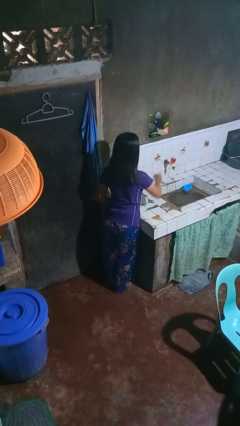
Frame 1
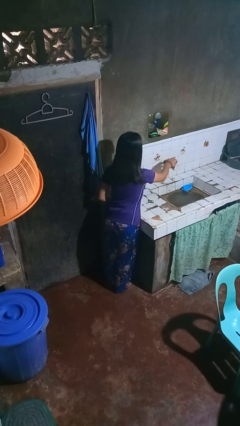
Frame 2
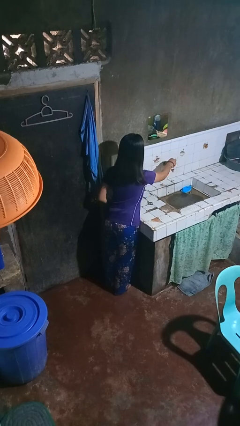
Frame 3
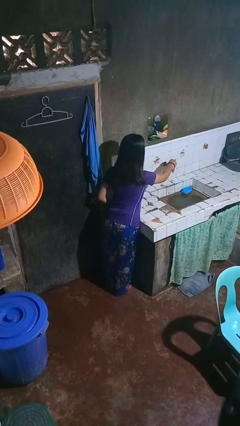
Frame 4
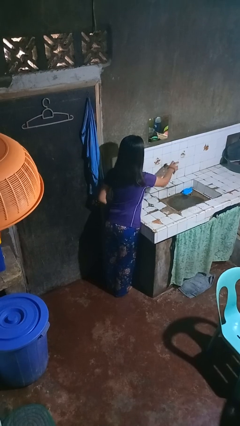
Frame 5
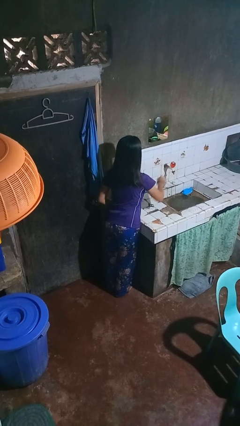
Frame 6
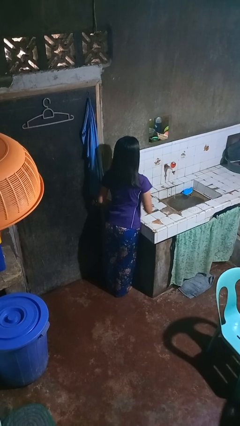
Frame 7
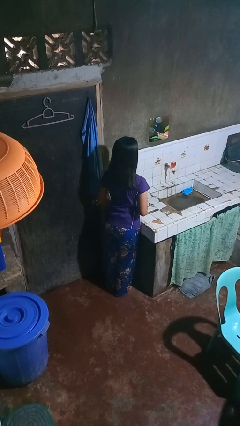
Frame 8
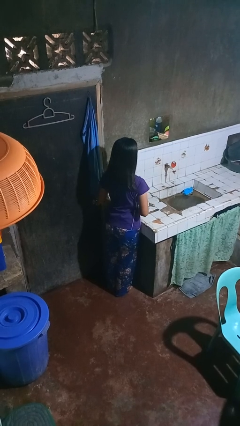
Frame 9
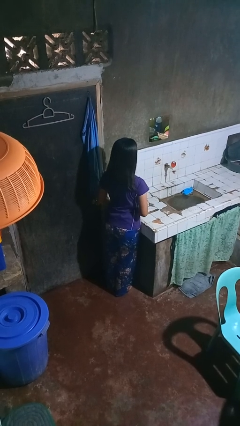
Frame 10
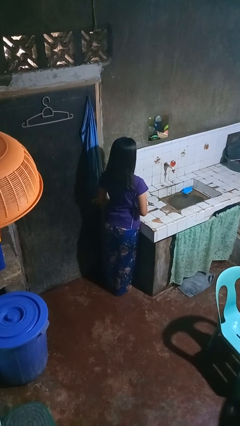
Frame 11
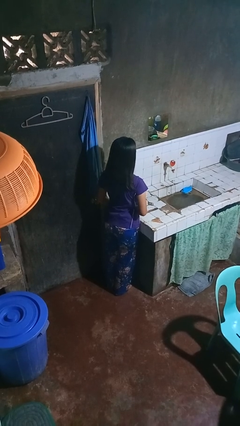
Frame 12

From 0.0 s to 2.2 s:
person turns on faucet

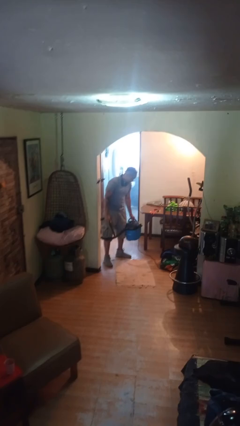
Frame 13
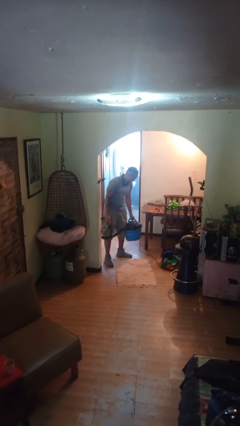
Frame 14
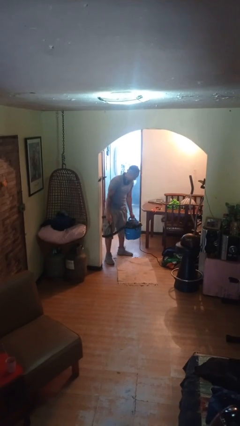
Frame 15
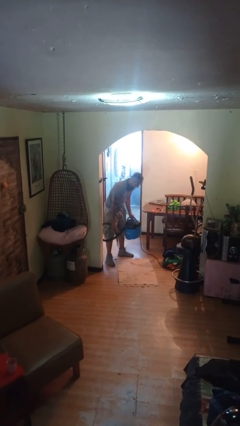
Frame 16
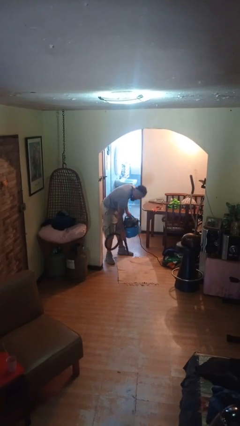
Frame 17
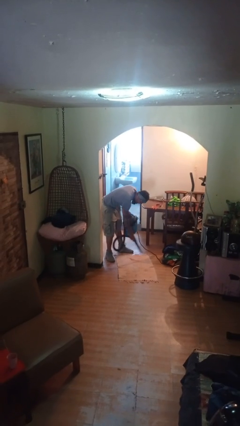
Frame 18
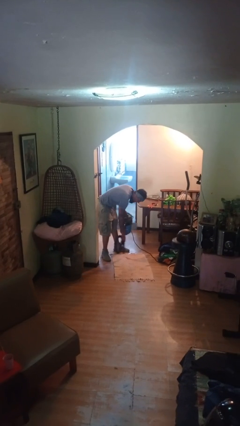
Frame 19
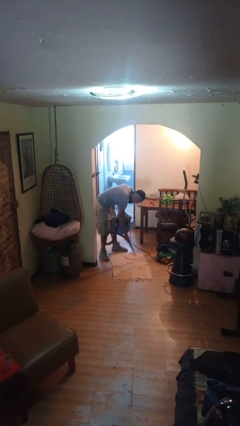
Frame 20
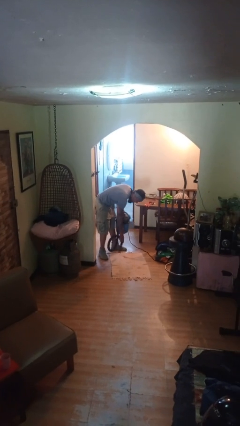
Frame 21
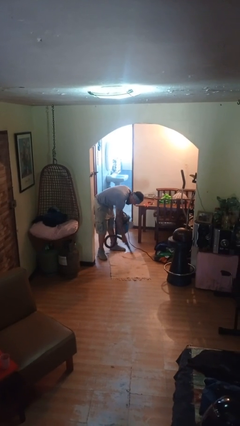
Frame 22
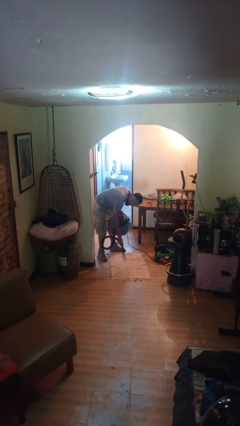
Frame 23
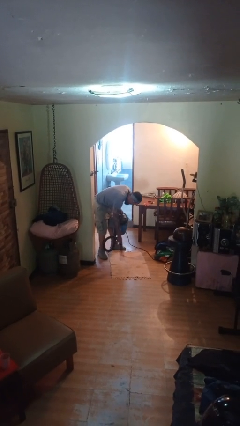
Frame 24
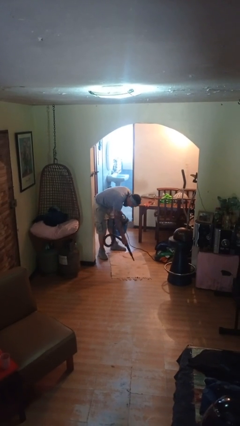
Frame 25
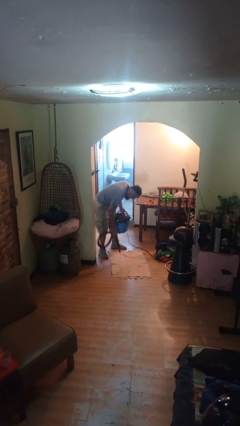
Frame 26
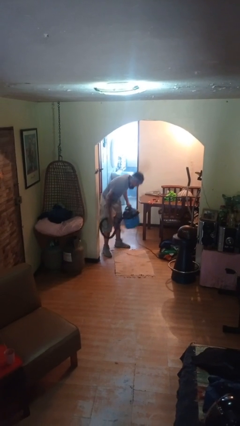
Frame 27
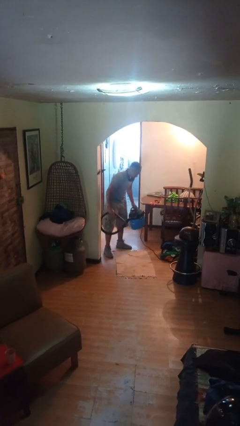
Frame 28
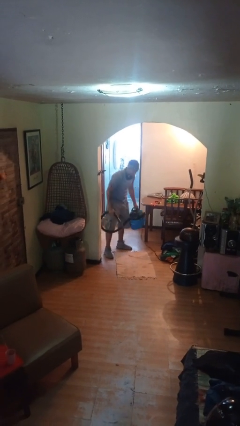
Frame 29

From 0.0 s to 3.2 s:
person vacuums carpet

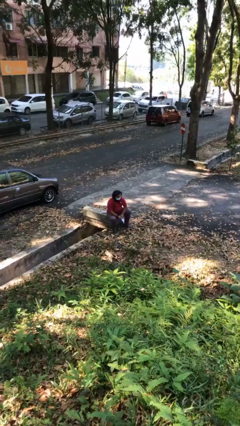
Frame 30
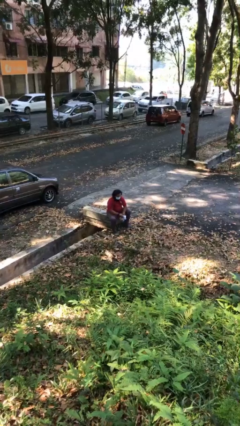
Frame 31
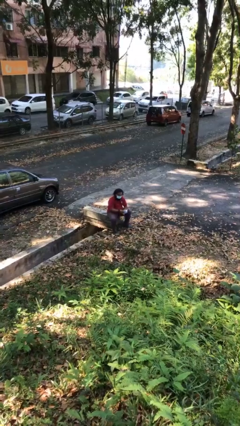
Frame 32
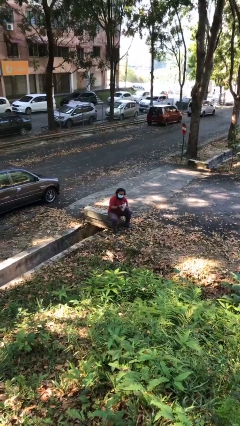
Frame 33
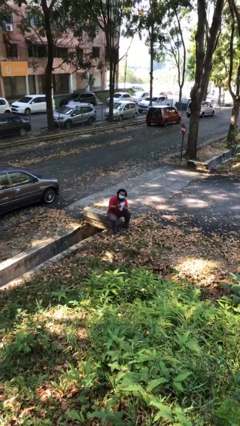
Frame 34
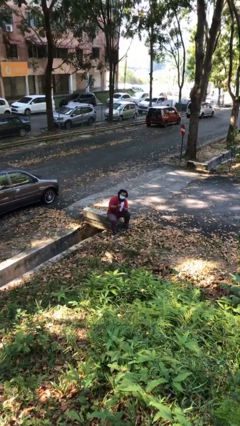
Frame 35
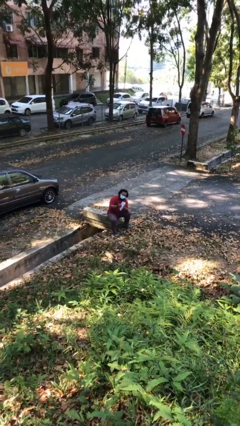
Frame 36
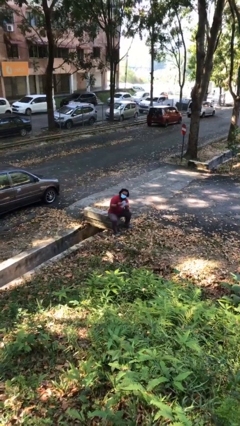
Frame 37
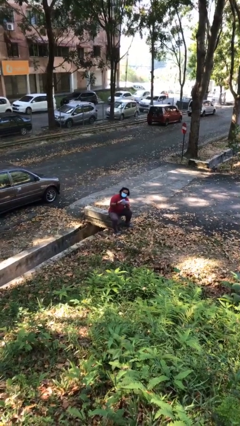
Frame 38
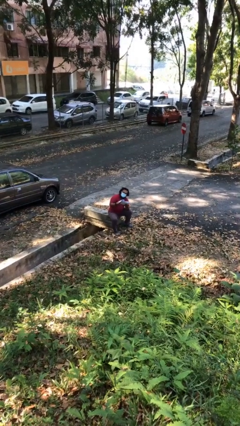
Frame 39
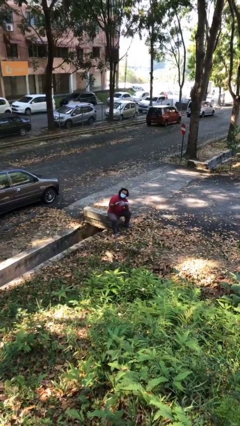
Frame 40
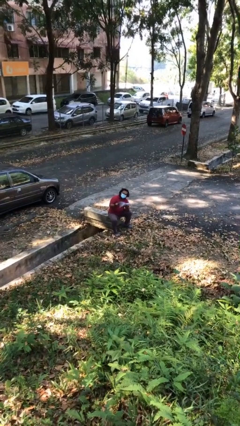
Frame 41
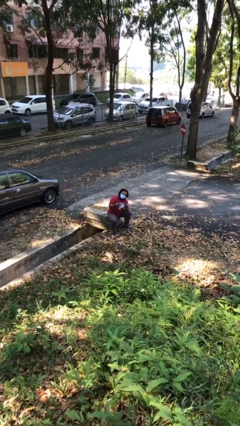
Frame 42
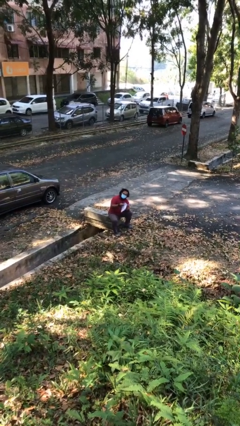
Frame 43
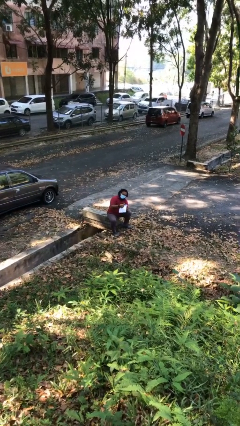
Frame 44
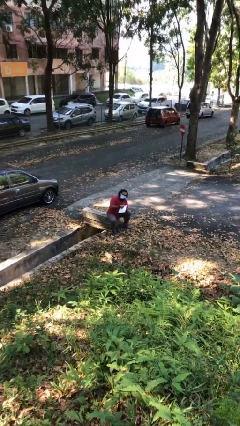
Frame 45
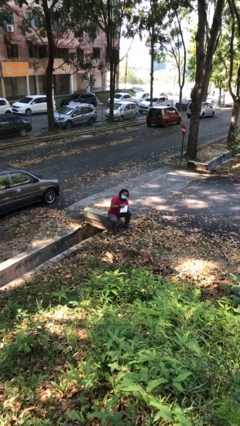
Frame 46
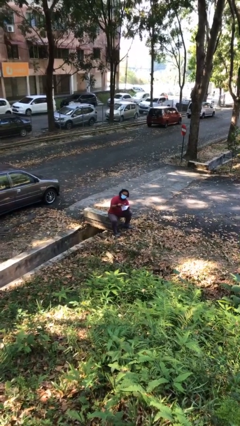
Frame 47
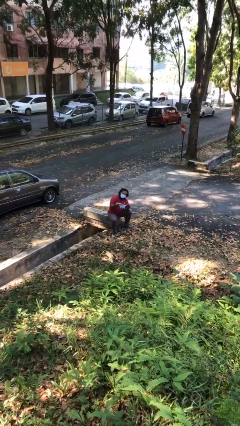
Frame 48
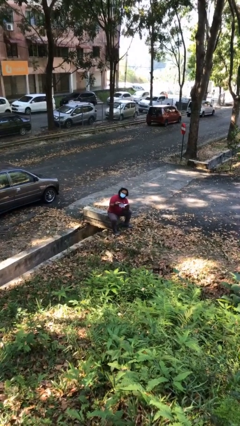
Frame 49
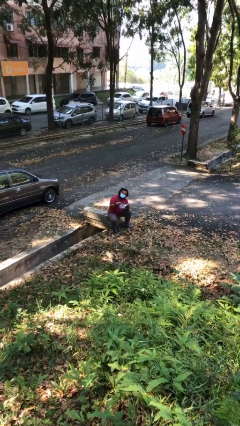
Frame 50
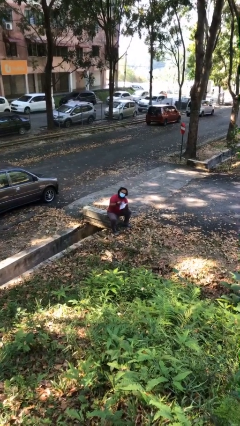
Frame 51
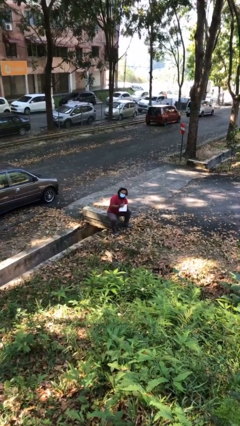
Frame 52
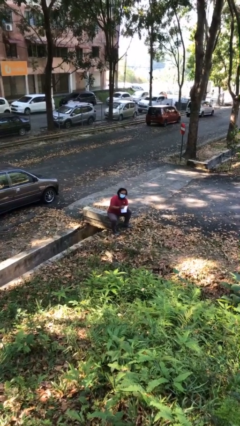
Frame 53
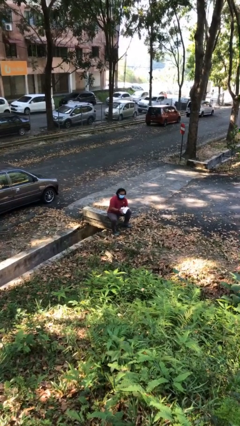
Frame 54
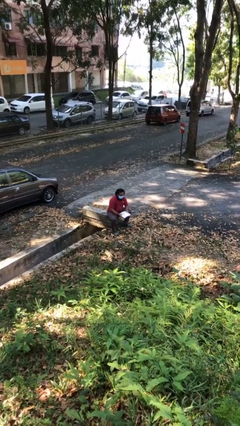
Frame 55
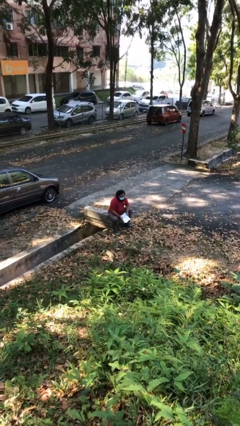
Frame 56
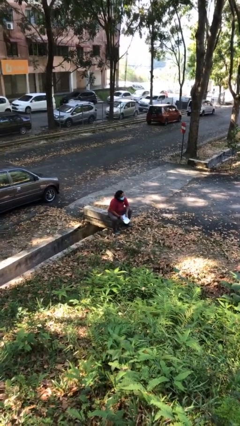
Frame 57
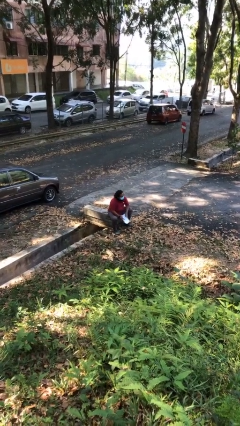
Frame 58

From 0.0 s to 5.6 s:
person reads document

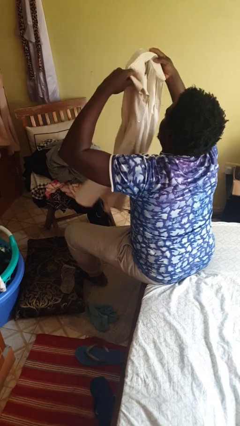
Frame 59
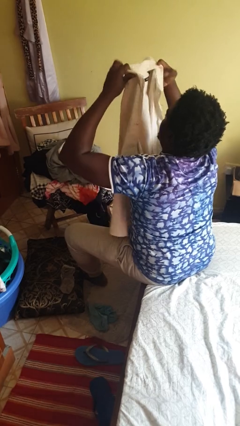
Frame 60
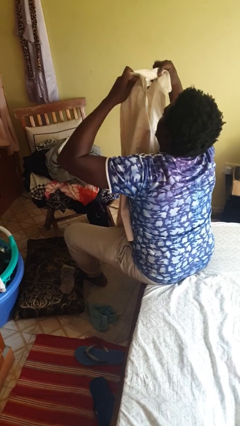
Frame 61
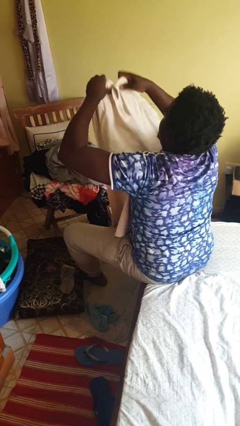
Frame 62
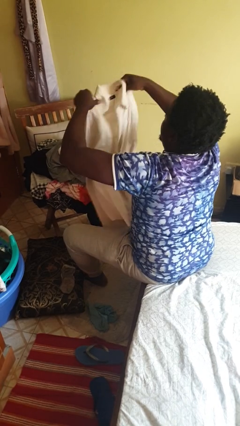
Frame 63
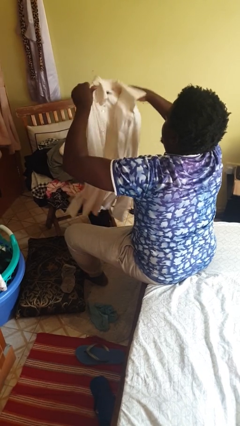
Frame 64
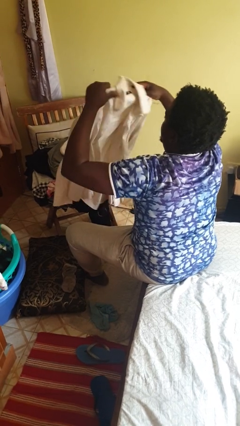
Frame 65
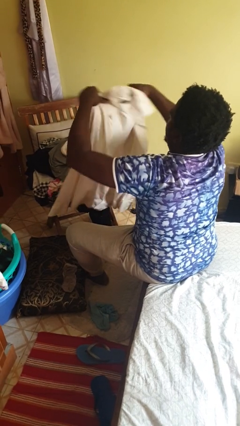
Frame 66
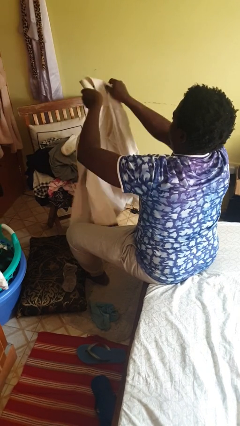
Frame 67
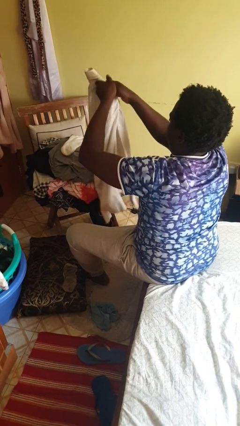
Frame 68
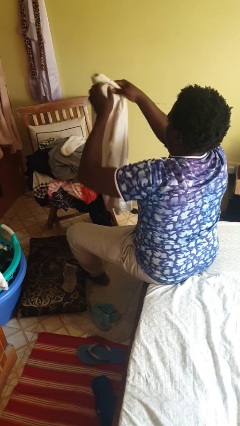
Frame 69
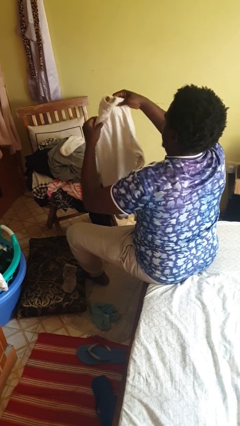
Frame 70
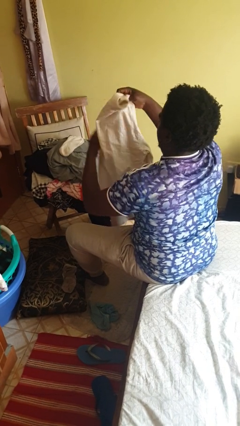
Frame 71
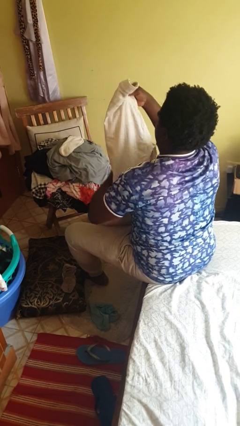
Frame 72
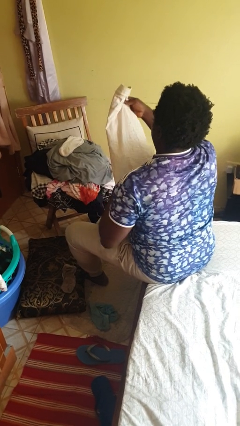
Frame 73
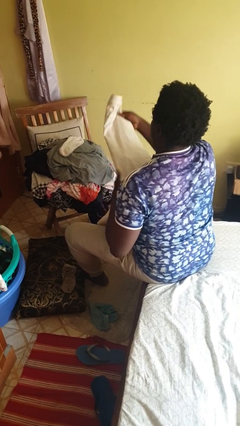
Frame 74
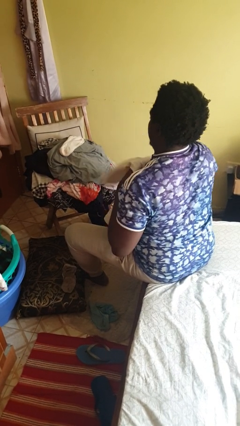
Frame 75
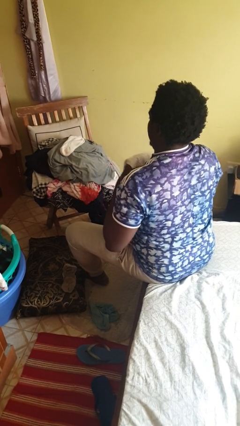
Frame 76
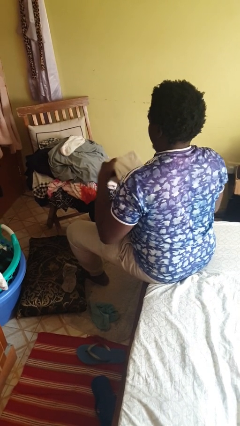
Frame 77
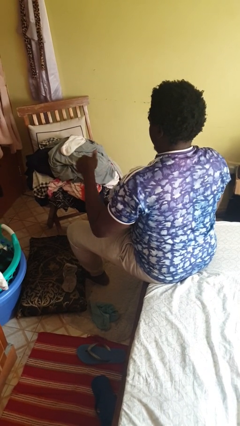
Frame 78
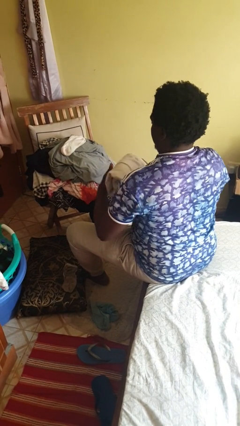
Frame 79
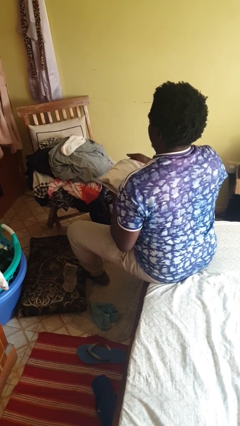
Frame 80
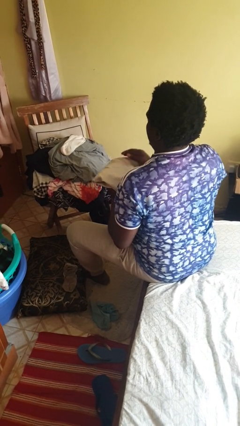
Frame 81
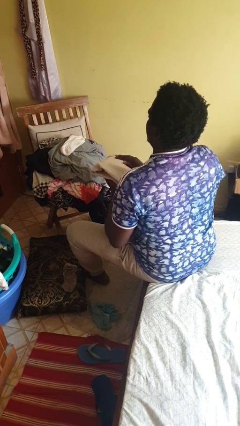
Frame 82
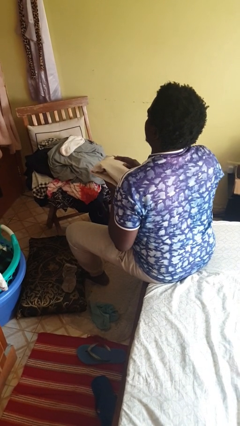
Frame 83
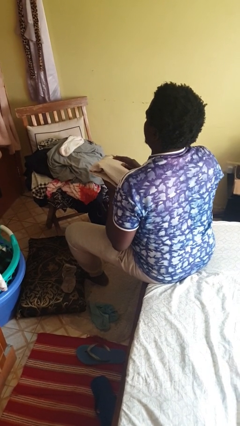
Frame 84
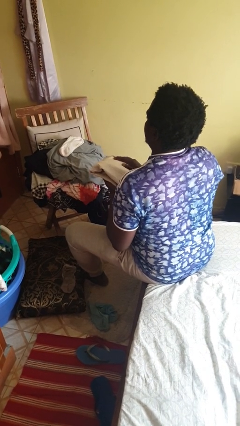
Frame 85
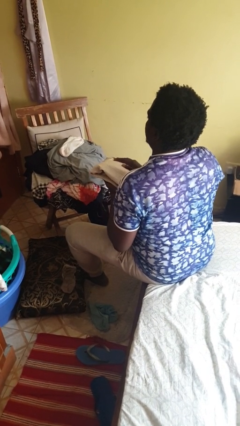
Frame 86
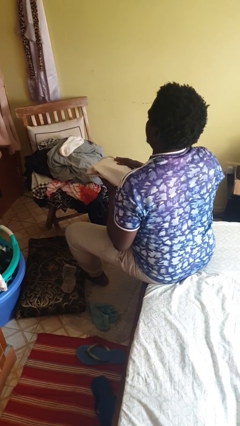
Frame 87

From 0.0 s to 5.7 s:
person folds shirt

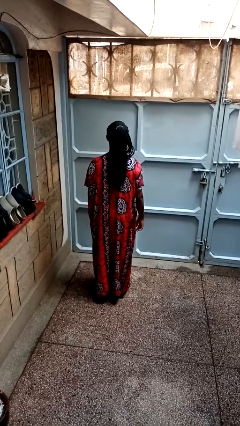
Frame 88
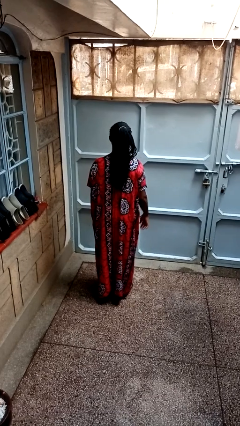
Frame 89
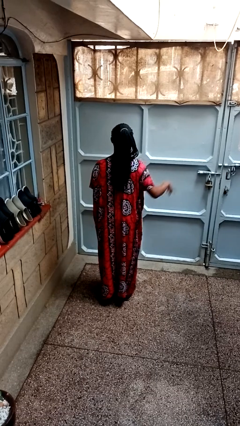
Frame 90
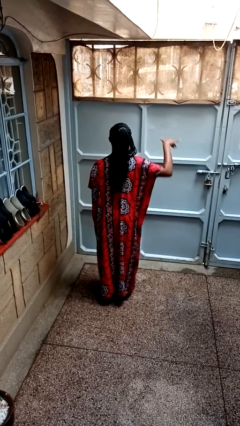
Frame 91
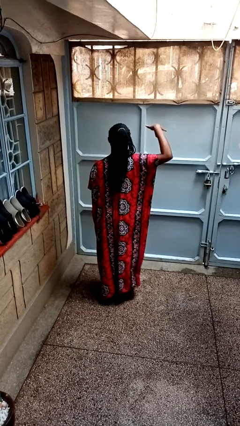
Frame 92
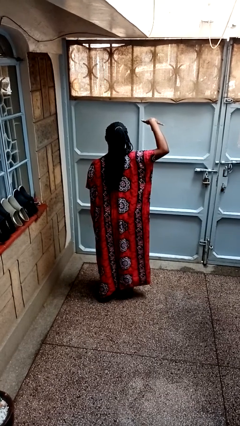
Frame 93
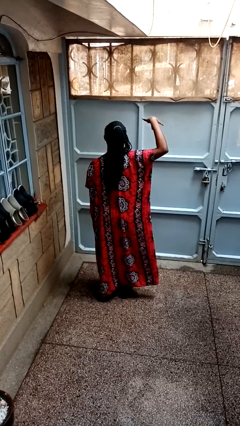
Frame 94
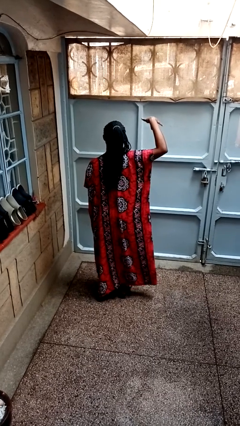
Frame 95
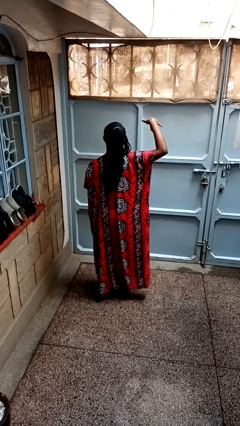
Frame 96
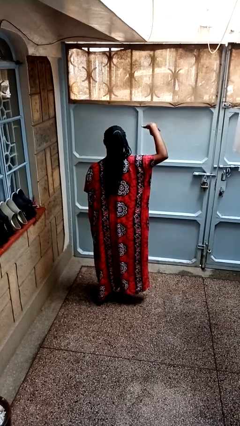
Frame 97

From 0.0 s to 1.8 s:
person gestures hang loose
